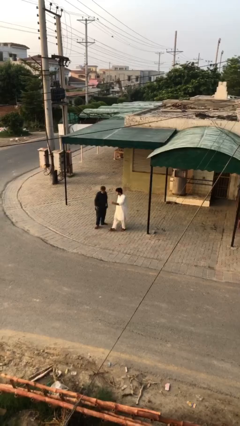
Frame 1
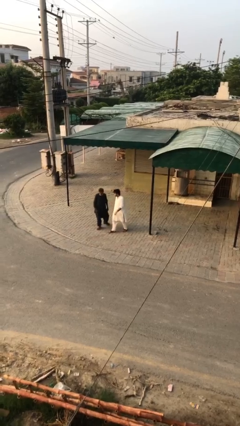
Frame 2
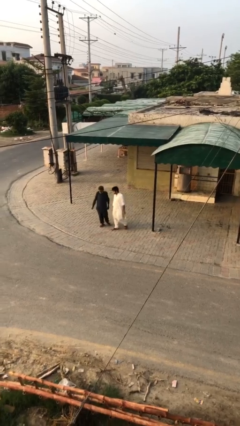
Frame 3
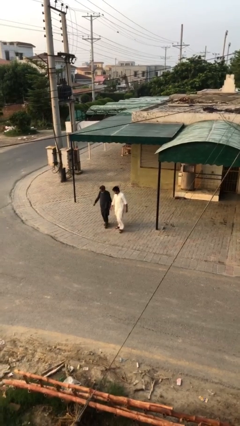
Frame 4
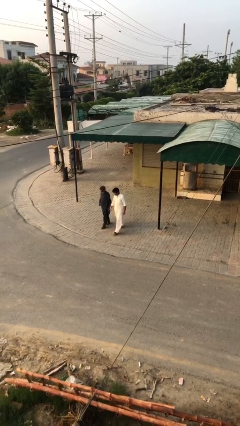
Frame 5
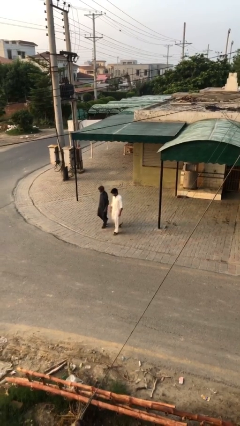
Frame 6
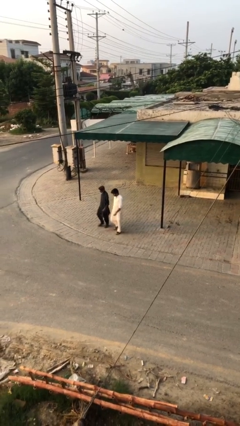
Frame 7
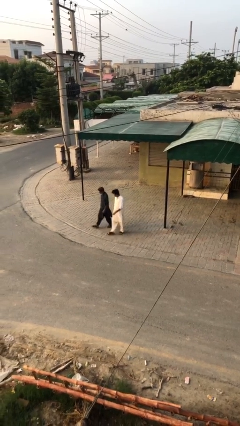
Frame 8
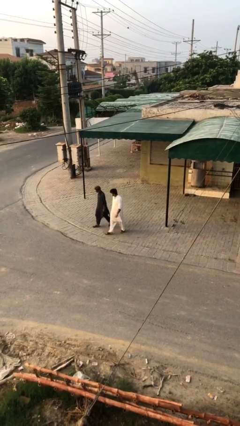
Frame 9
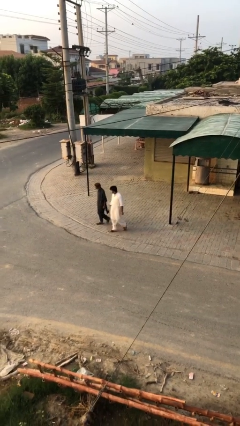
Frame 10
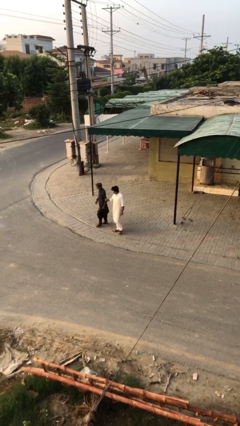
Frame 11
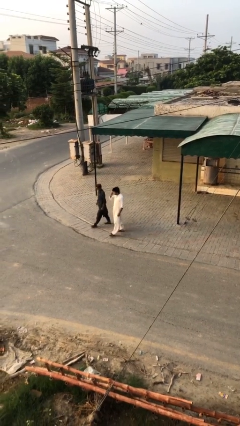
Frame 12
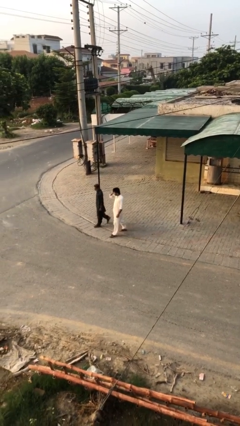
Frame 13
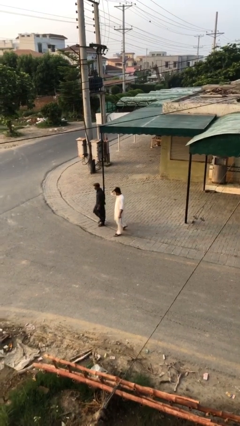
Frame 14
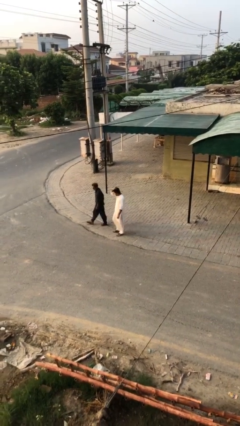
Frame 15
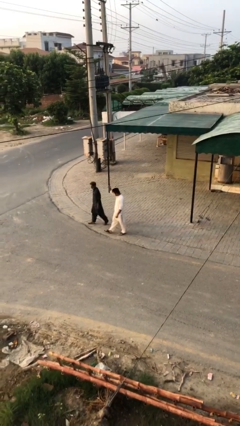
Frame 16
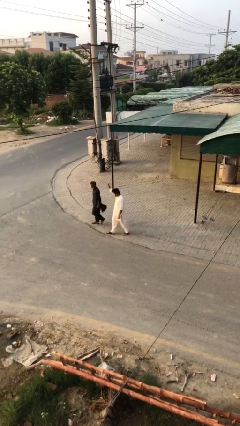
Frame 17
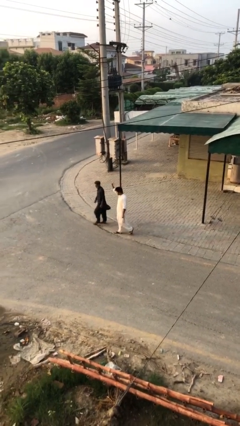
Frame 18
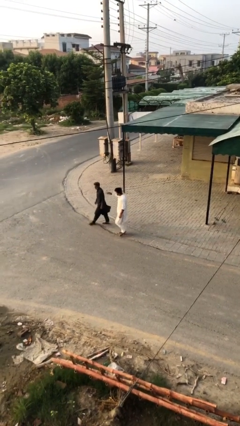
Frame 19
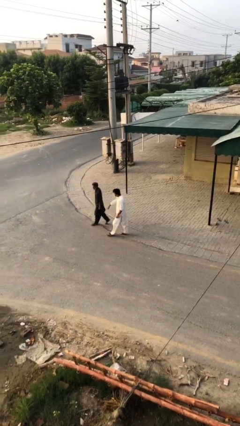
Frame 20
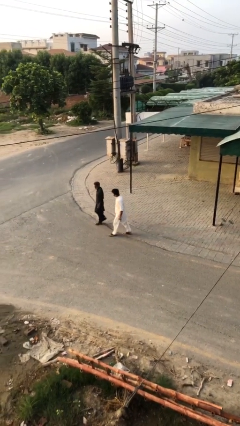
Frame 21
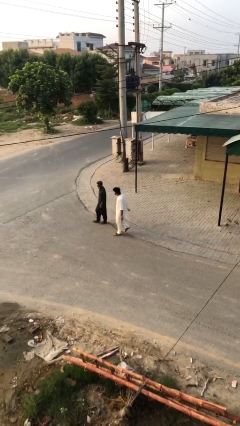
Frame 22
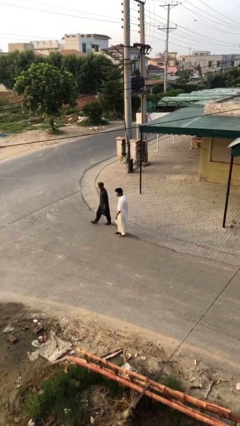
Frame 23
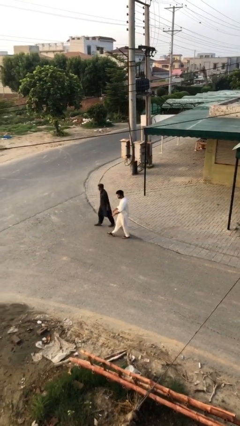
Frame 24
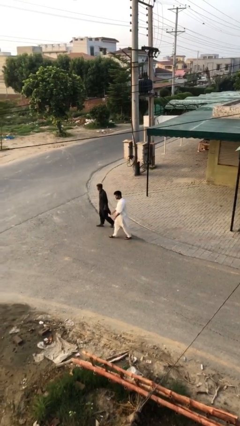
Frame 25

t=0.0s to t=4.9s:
person talks to person

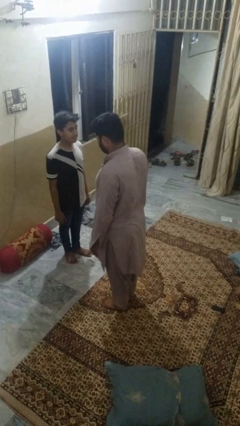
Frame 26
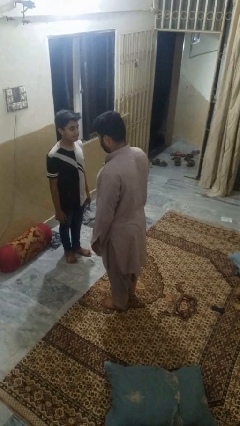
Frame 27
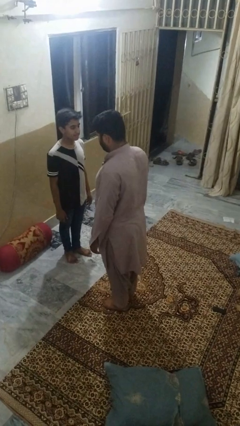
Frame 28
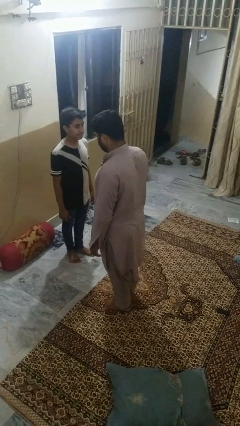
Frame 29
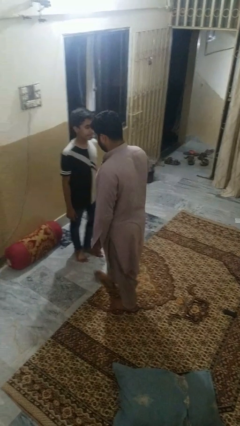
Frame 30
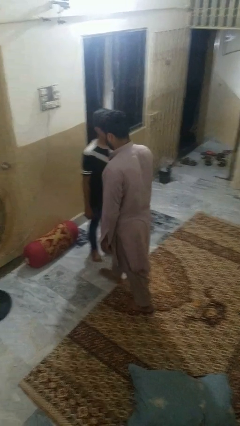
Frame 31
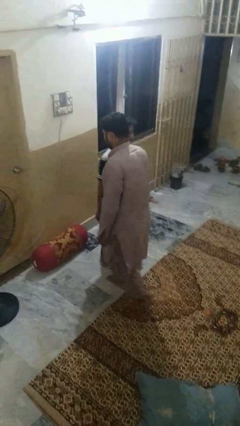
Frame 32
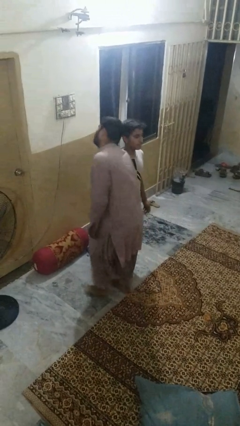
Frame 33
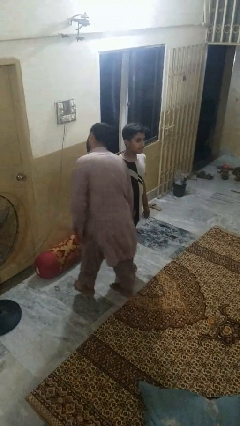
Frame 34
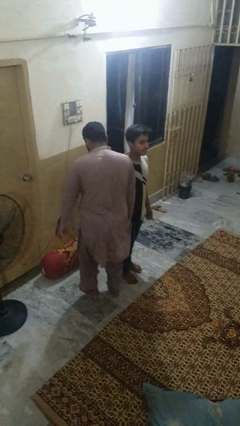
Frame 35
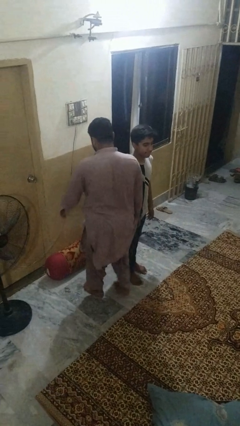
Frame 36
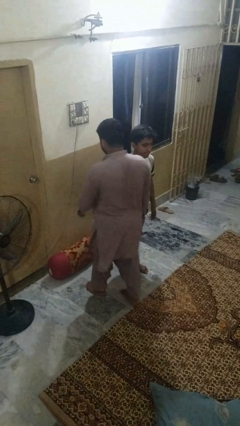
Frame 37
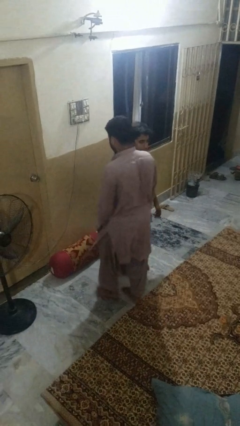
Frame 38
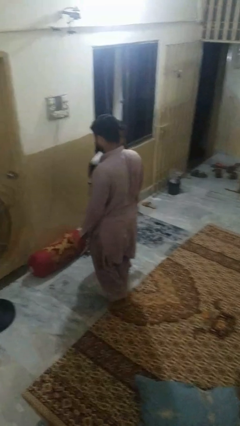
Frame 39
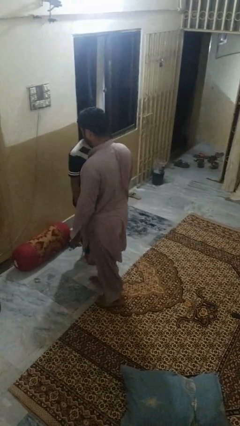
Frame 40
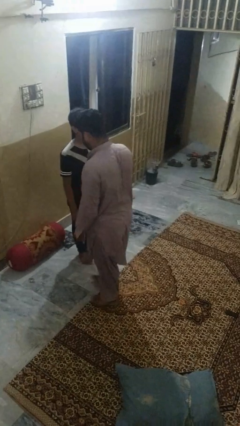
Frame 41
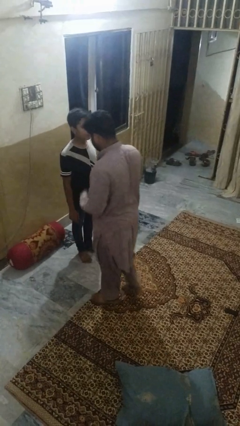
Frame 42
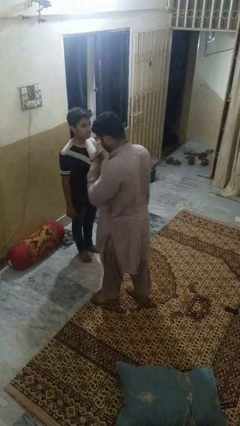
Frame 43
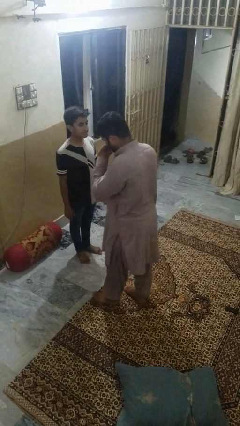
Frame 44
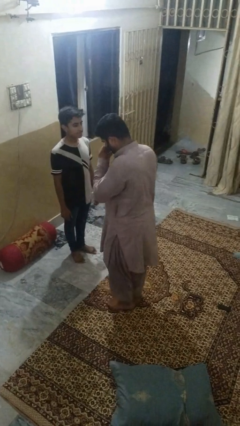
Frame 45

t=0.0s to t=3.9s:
person bumps into person

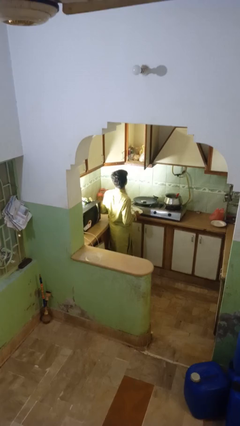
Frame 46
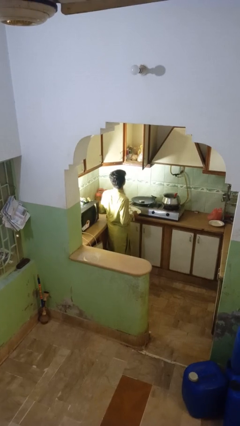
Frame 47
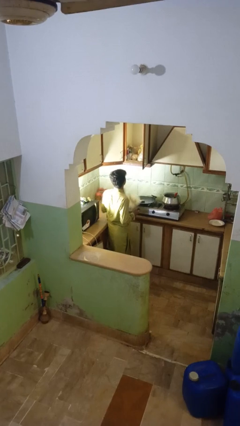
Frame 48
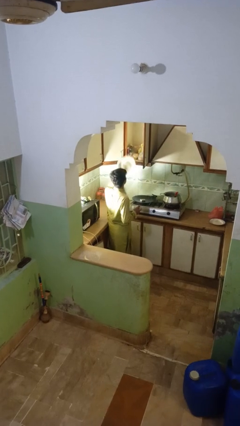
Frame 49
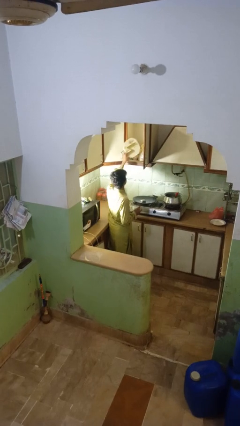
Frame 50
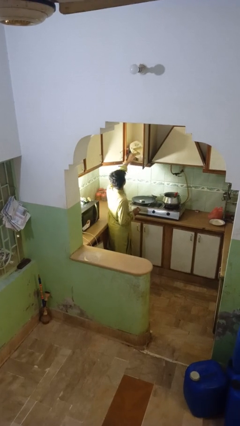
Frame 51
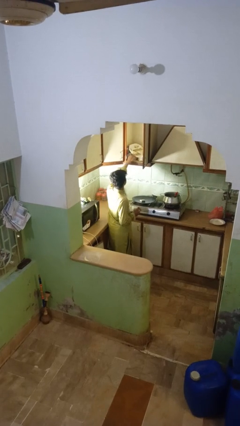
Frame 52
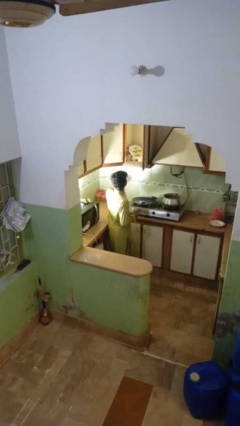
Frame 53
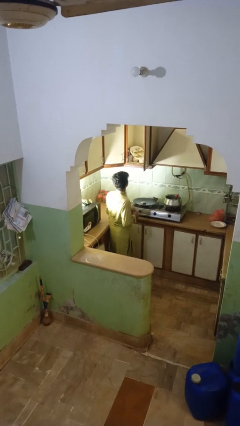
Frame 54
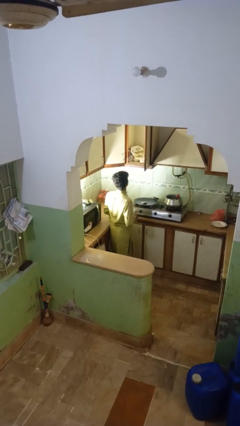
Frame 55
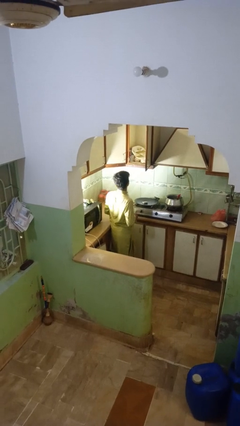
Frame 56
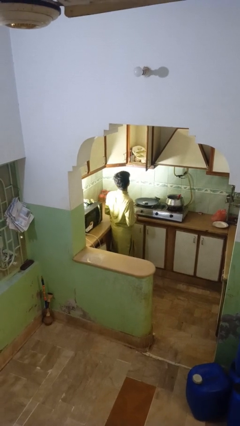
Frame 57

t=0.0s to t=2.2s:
person puts object in cabinet

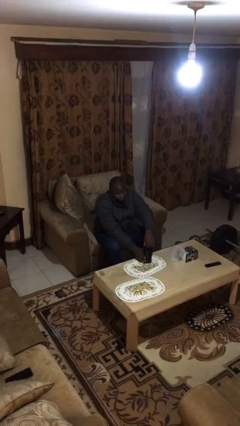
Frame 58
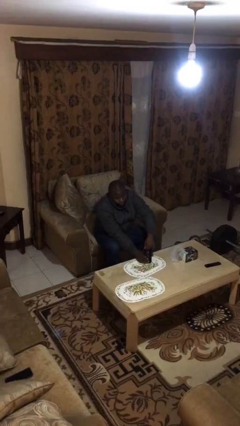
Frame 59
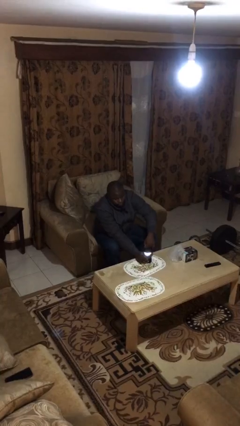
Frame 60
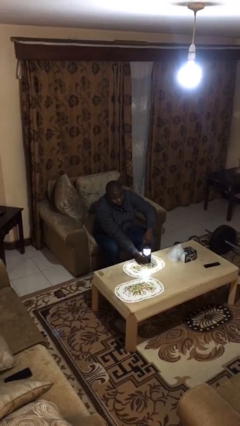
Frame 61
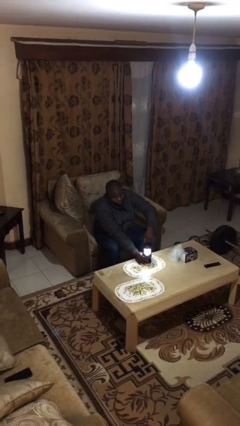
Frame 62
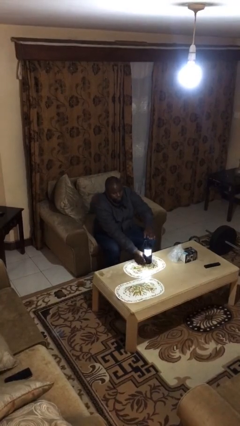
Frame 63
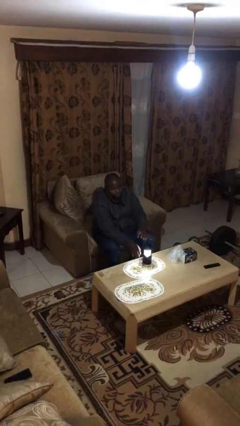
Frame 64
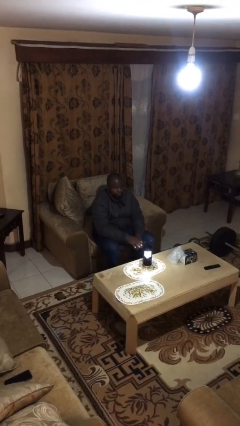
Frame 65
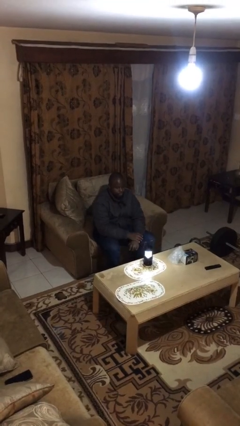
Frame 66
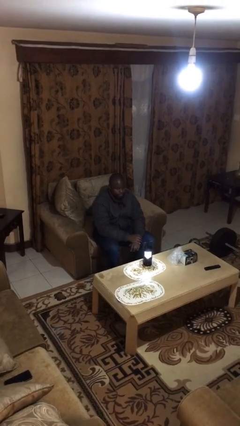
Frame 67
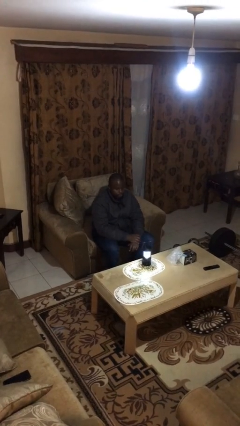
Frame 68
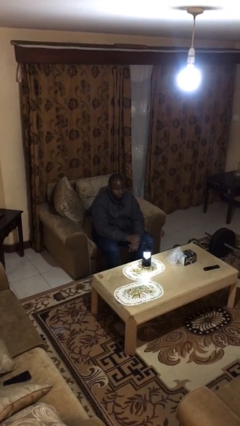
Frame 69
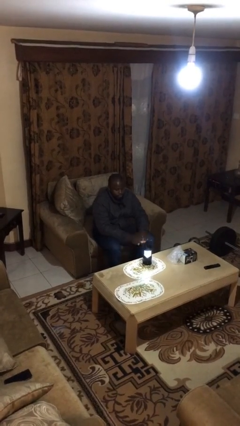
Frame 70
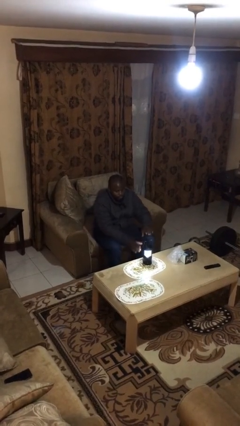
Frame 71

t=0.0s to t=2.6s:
person turns on lamp

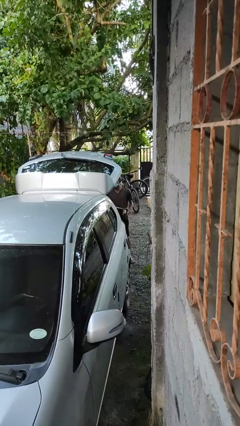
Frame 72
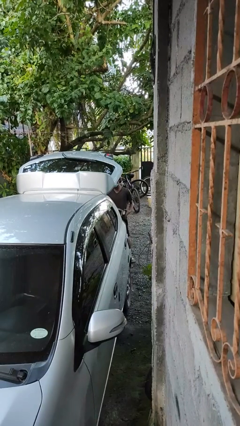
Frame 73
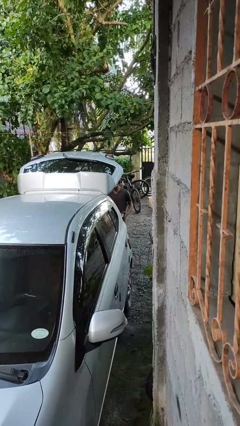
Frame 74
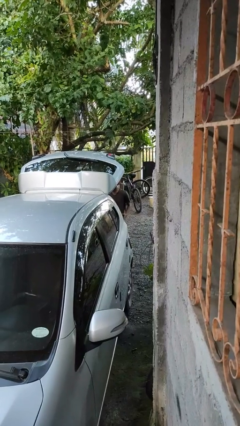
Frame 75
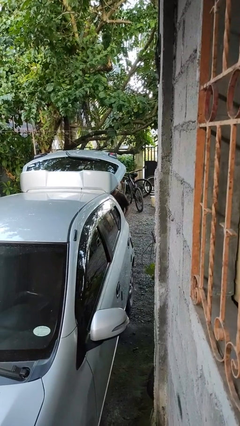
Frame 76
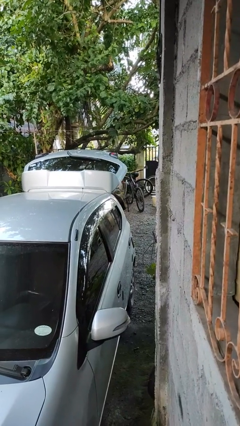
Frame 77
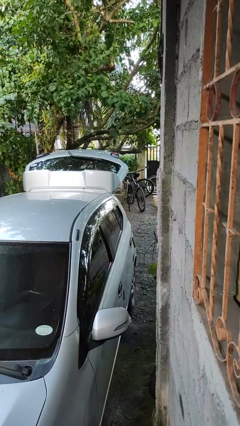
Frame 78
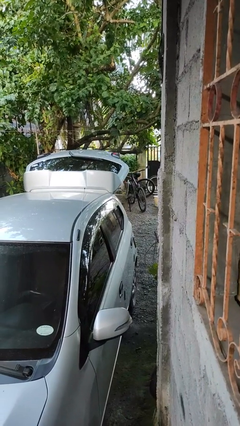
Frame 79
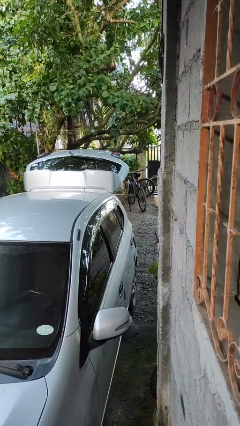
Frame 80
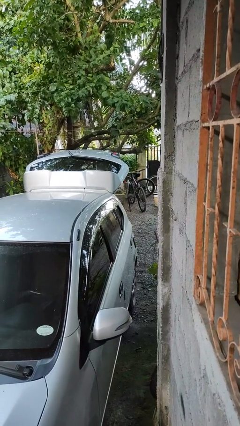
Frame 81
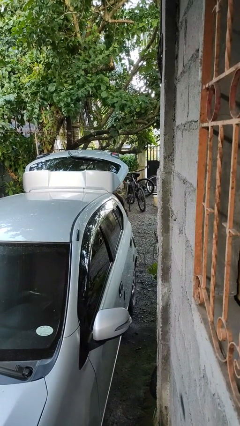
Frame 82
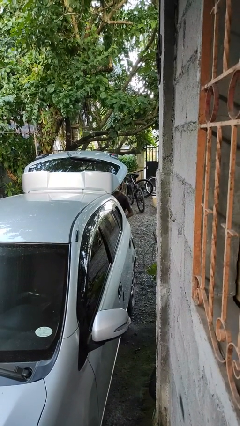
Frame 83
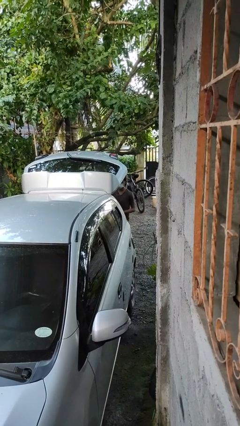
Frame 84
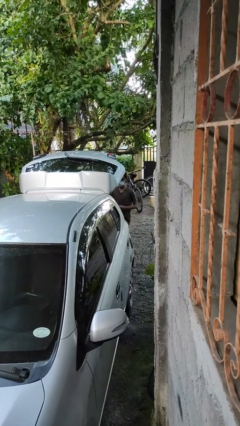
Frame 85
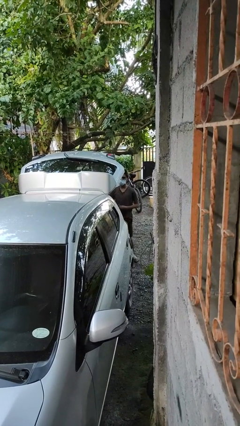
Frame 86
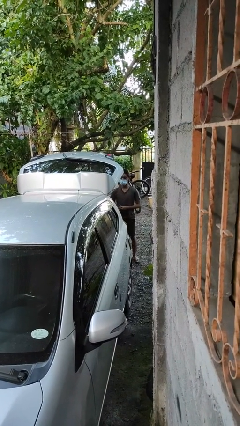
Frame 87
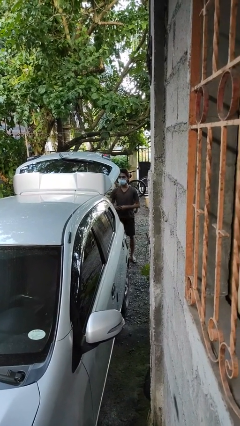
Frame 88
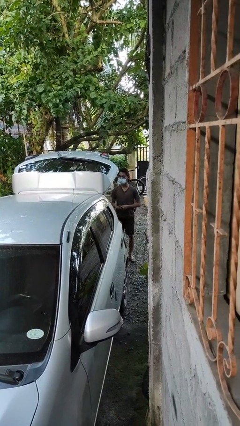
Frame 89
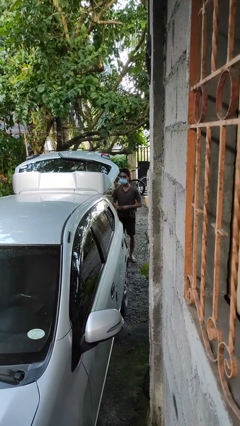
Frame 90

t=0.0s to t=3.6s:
person loads car

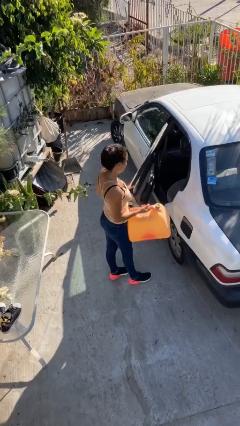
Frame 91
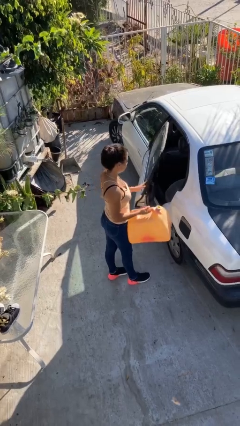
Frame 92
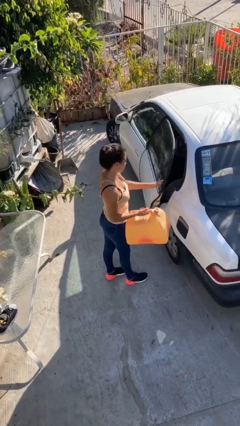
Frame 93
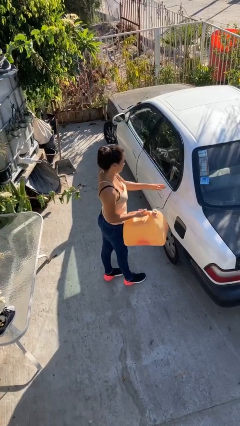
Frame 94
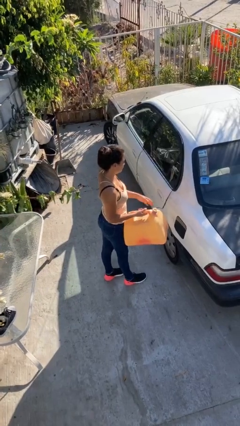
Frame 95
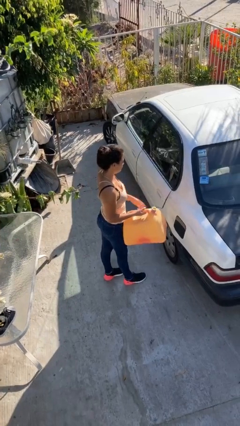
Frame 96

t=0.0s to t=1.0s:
person closes car door
